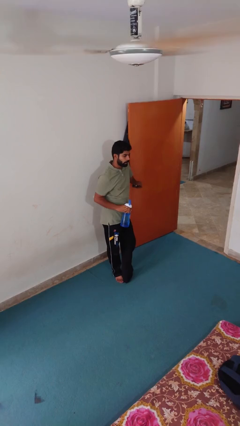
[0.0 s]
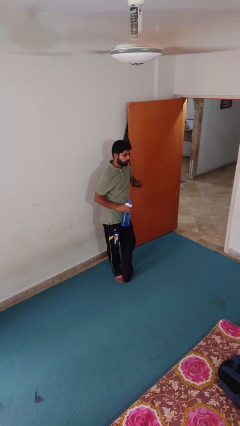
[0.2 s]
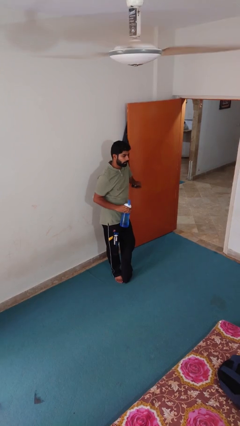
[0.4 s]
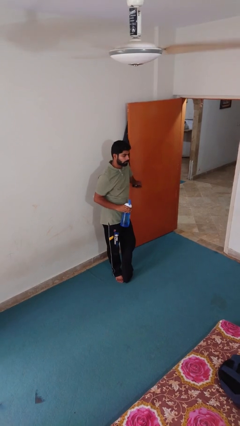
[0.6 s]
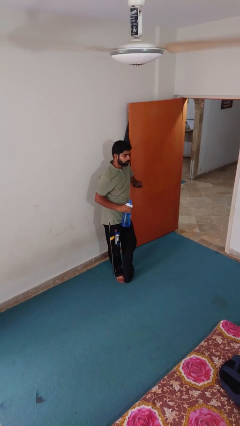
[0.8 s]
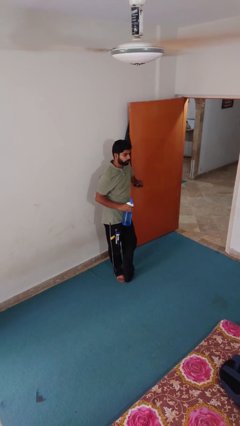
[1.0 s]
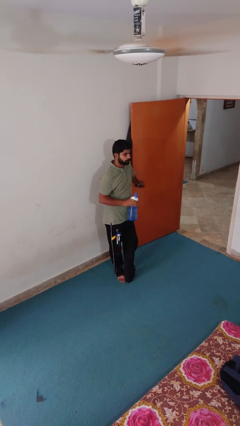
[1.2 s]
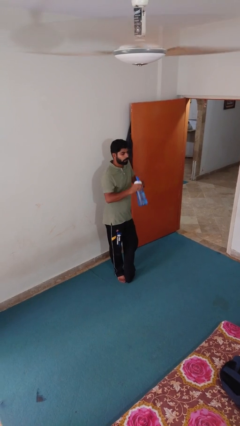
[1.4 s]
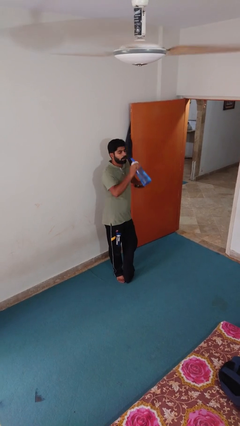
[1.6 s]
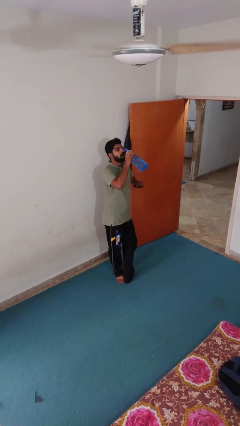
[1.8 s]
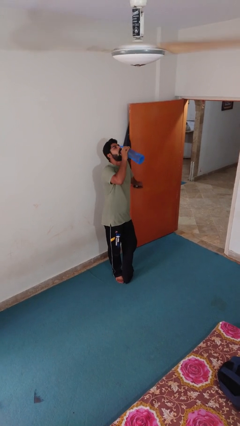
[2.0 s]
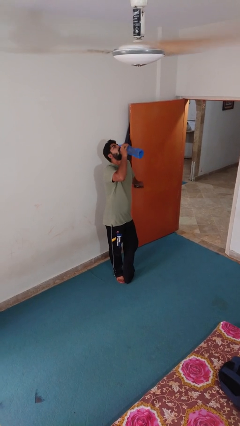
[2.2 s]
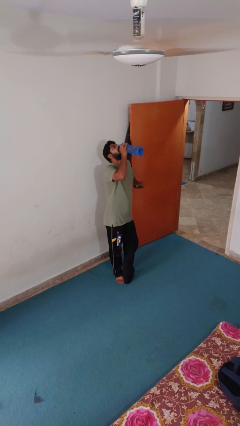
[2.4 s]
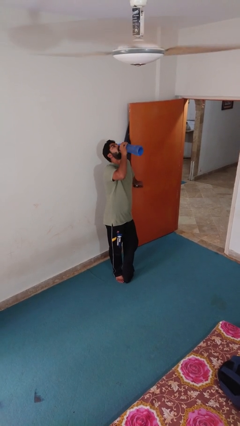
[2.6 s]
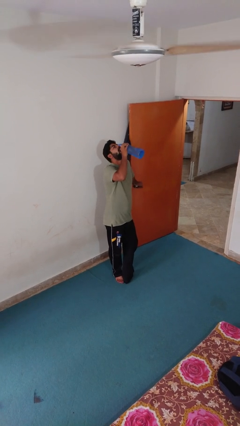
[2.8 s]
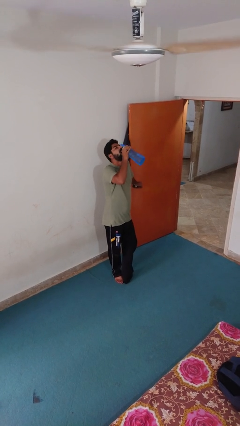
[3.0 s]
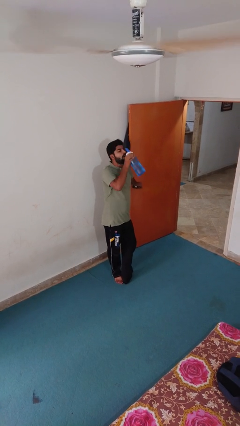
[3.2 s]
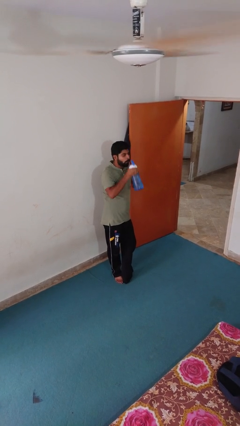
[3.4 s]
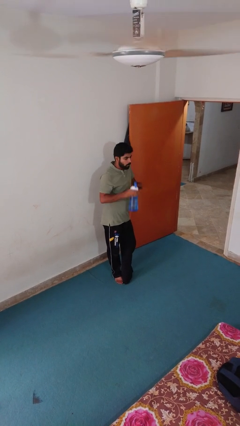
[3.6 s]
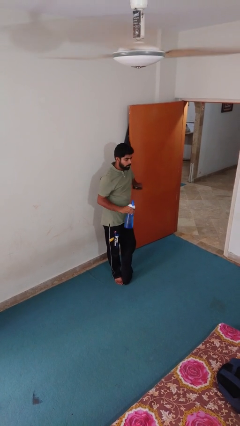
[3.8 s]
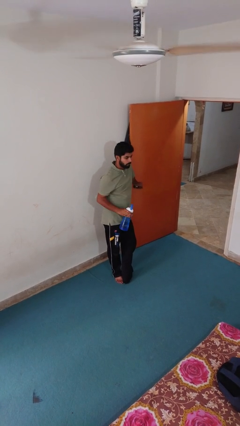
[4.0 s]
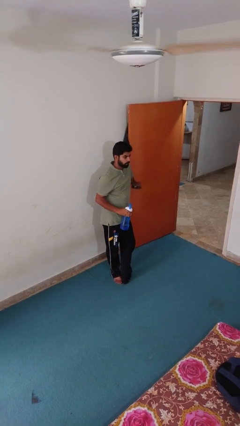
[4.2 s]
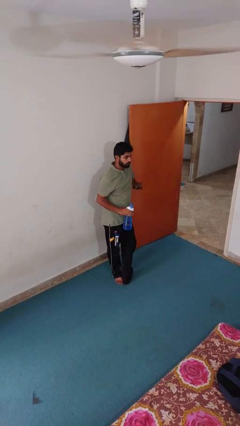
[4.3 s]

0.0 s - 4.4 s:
person drinks from bottle

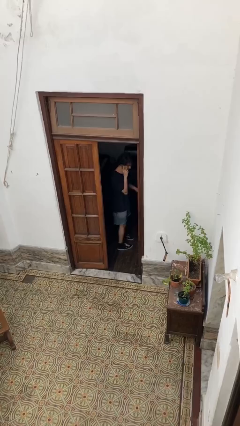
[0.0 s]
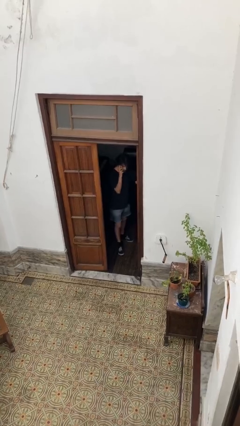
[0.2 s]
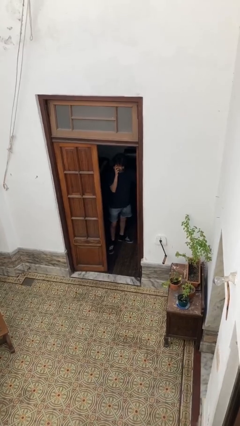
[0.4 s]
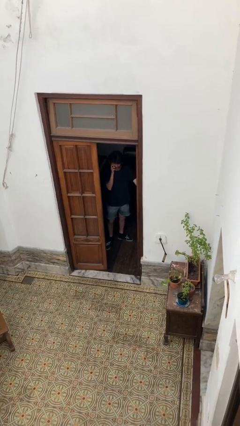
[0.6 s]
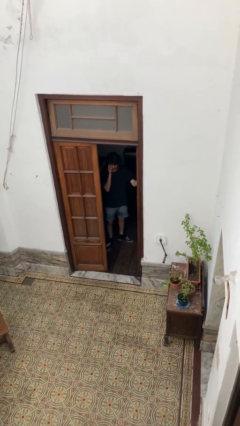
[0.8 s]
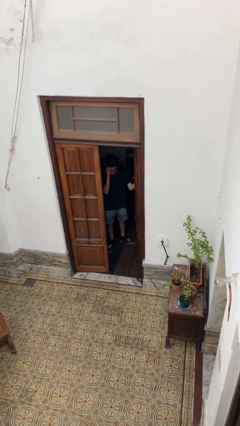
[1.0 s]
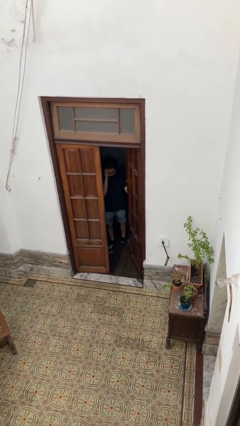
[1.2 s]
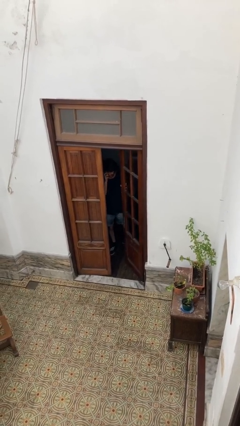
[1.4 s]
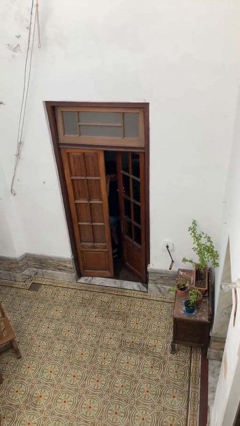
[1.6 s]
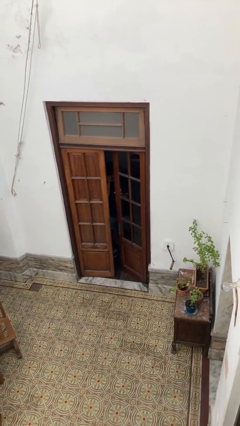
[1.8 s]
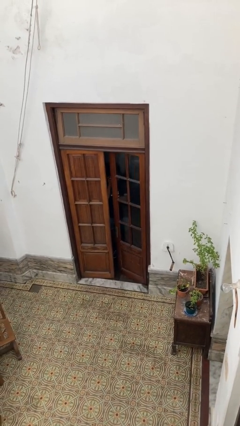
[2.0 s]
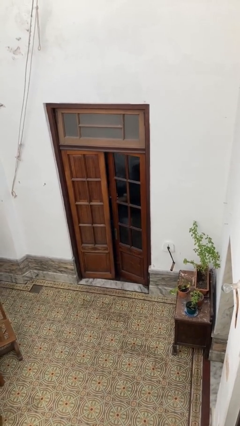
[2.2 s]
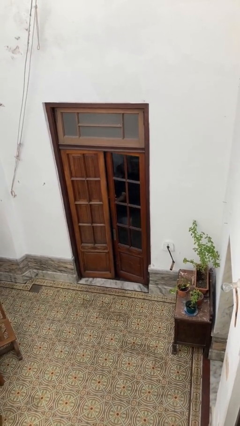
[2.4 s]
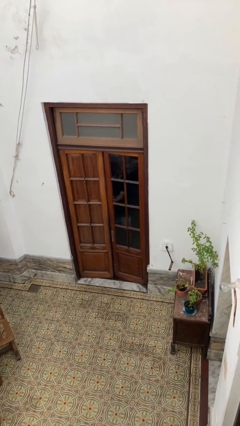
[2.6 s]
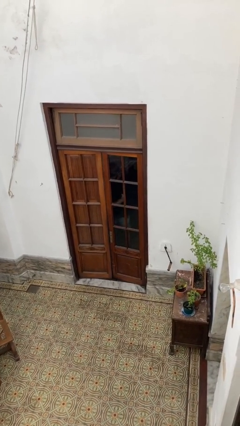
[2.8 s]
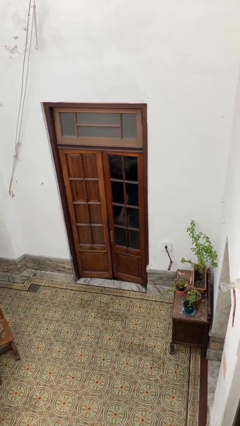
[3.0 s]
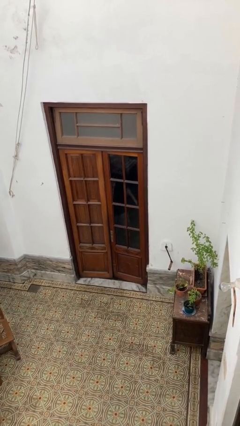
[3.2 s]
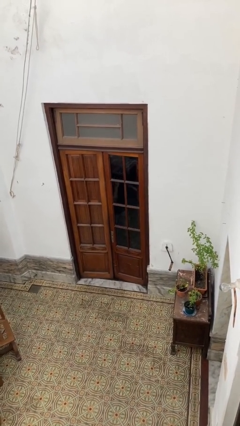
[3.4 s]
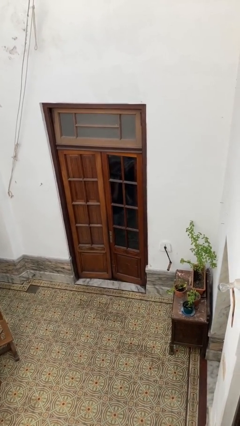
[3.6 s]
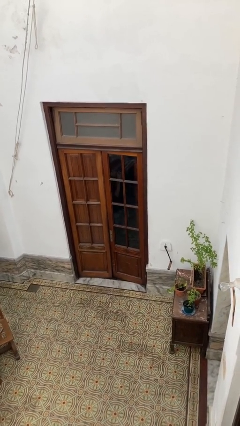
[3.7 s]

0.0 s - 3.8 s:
person closes facility door

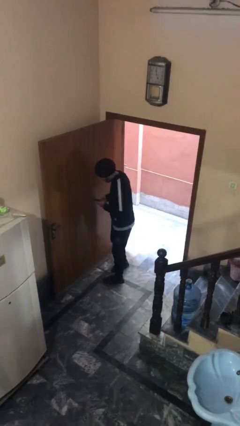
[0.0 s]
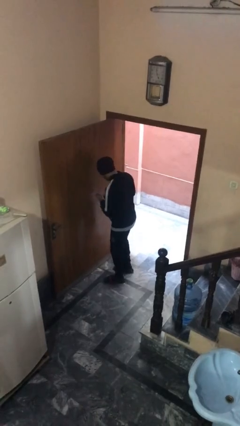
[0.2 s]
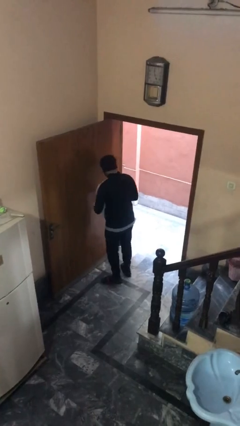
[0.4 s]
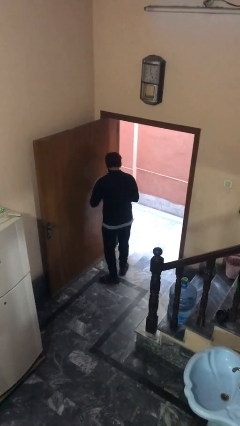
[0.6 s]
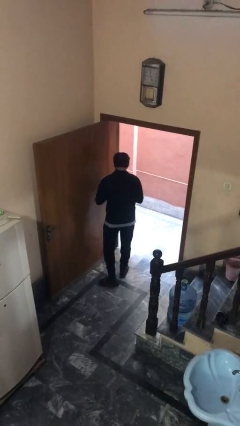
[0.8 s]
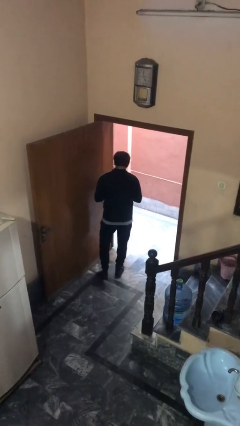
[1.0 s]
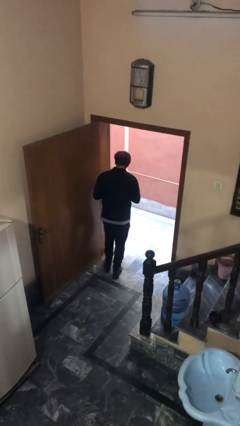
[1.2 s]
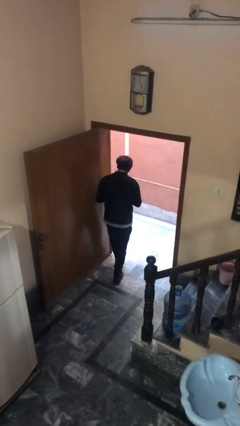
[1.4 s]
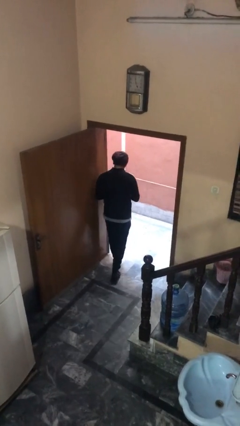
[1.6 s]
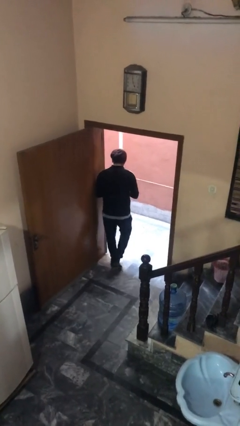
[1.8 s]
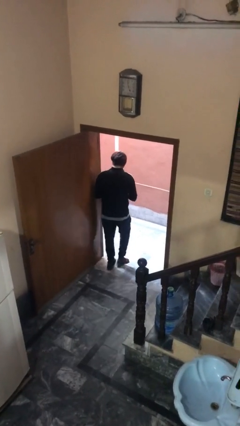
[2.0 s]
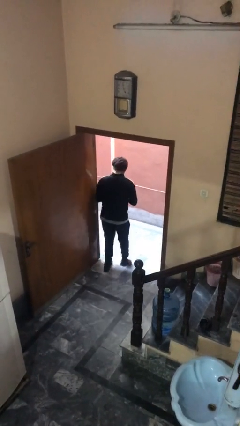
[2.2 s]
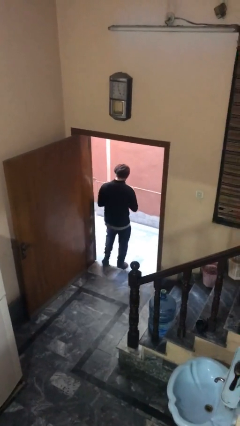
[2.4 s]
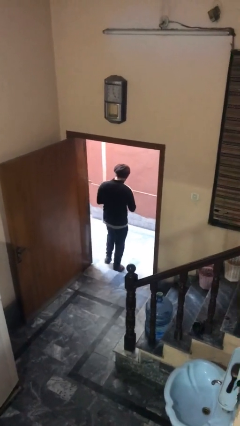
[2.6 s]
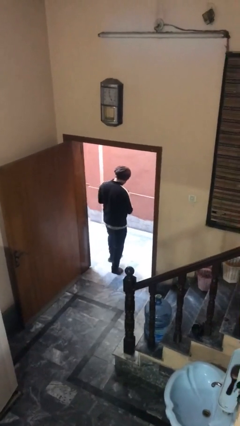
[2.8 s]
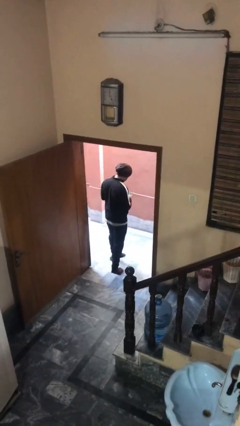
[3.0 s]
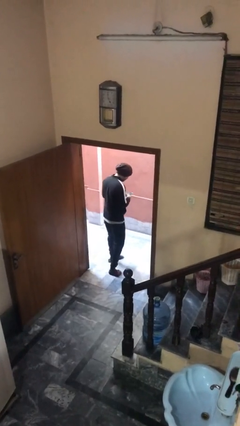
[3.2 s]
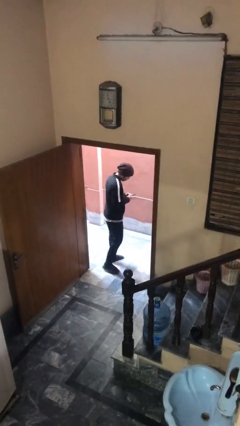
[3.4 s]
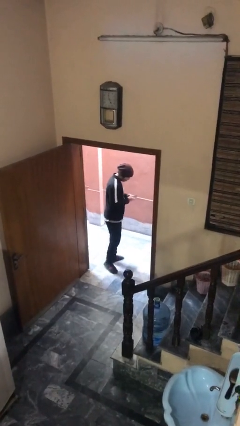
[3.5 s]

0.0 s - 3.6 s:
person exits scene through structure

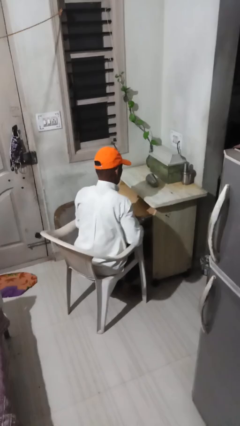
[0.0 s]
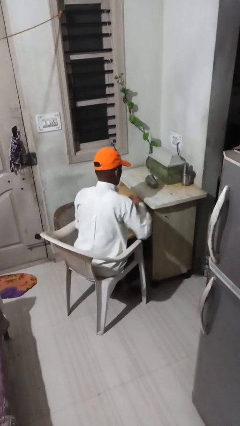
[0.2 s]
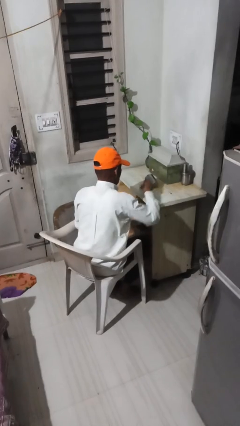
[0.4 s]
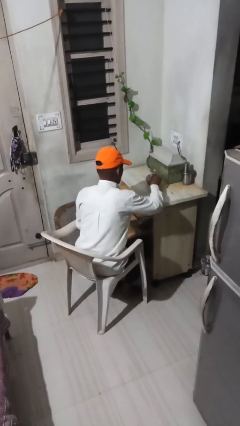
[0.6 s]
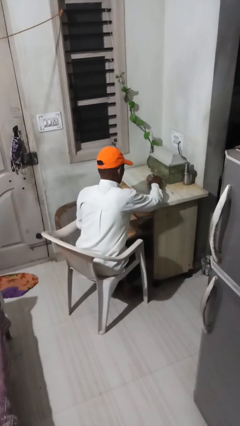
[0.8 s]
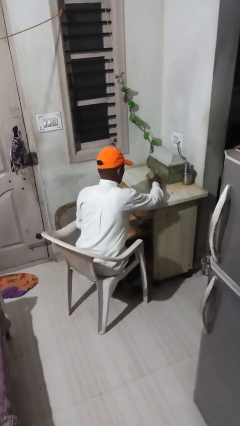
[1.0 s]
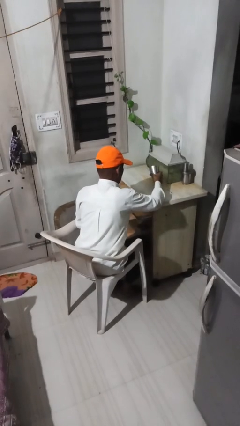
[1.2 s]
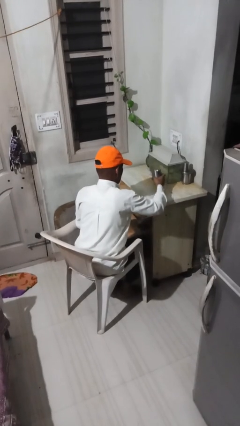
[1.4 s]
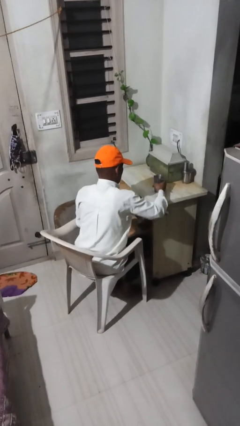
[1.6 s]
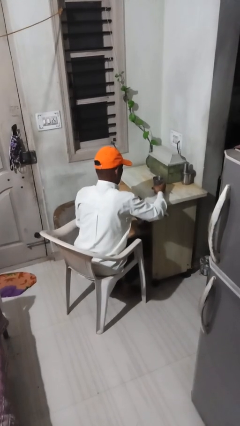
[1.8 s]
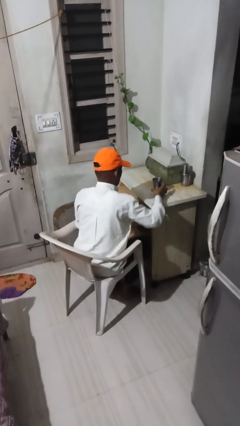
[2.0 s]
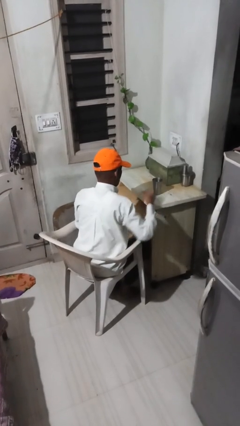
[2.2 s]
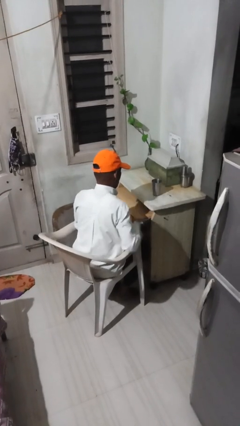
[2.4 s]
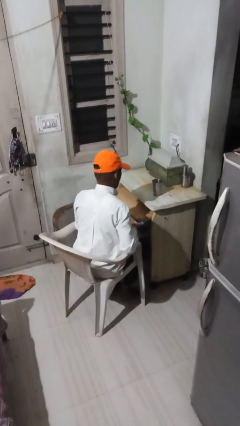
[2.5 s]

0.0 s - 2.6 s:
person sets upright glass

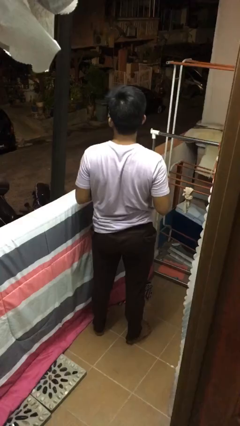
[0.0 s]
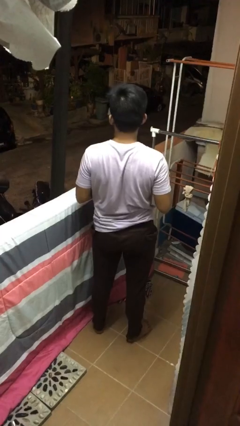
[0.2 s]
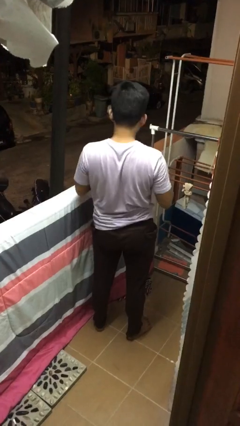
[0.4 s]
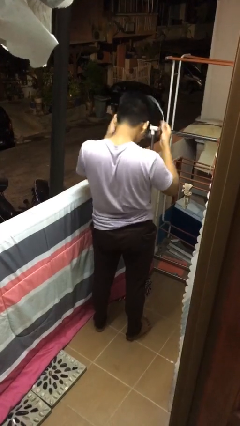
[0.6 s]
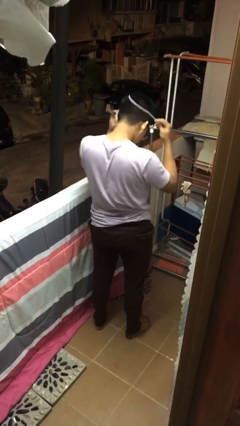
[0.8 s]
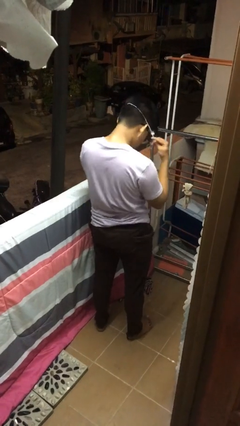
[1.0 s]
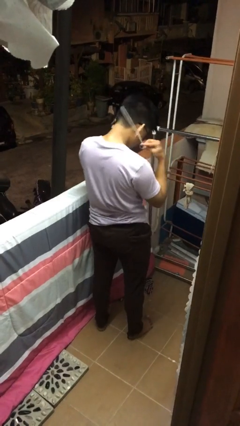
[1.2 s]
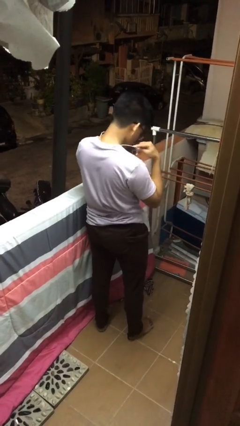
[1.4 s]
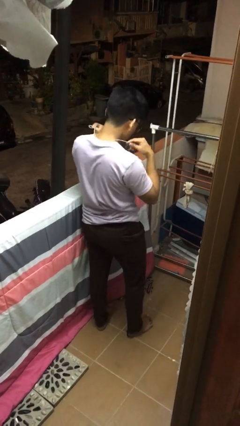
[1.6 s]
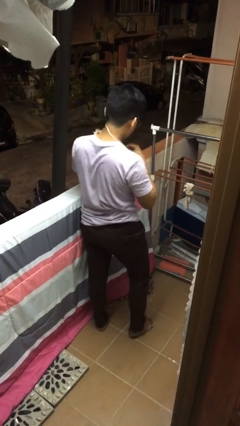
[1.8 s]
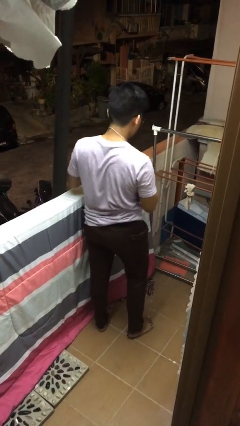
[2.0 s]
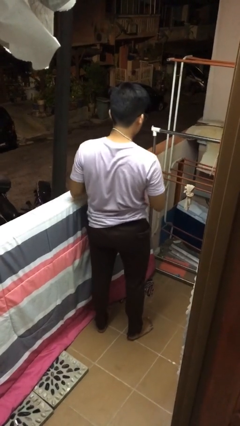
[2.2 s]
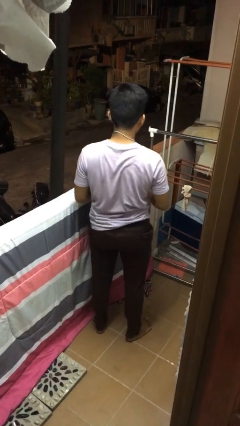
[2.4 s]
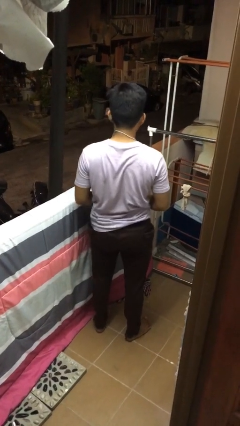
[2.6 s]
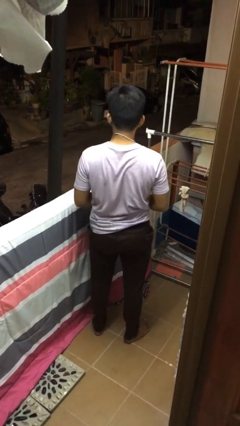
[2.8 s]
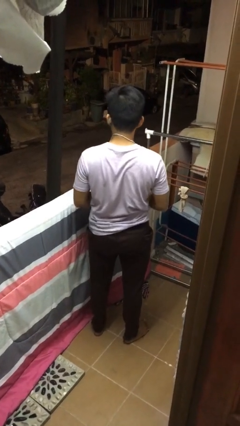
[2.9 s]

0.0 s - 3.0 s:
person puts on necklace
